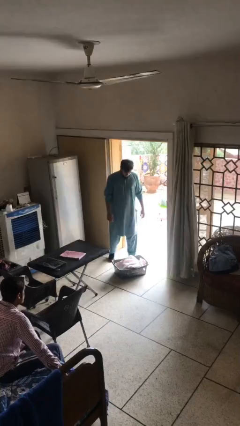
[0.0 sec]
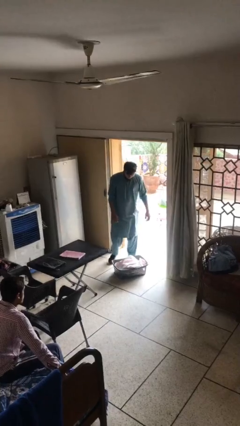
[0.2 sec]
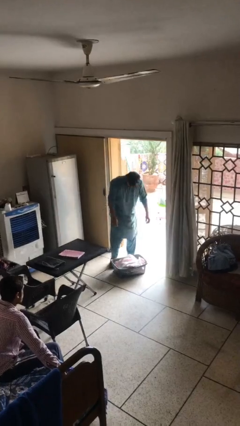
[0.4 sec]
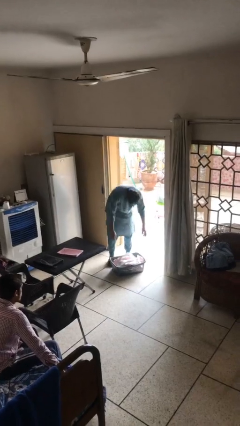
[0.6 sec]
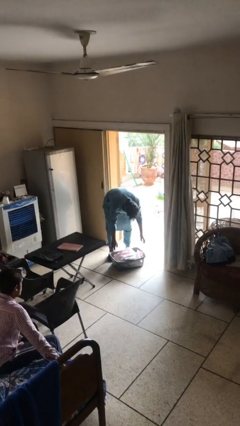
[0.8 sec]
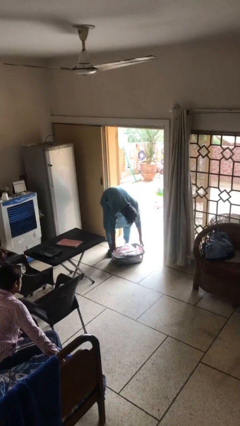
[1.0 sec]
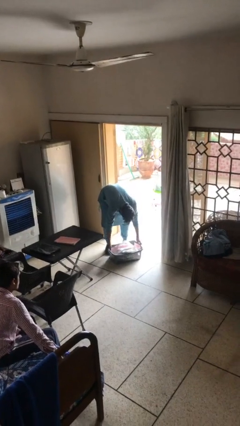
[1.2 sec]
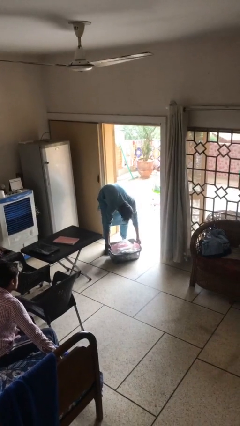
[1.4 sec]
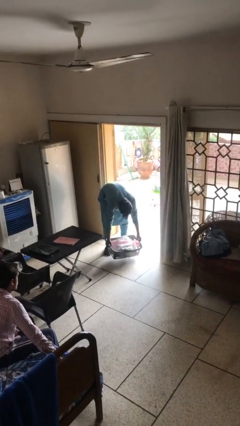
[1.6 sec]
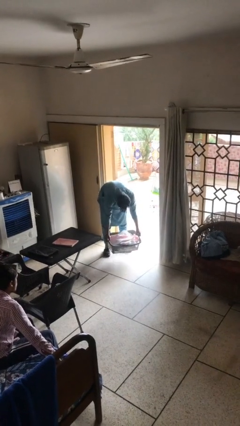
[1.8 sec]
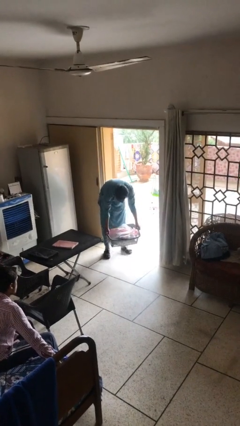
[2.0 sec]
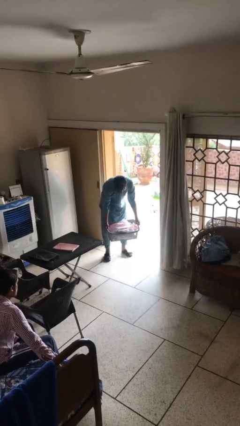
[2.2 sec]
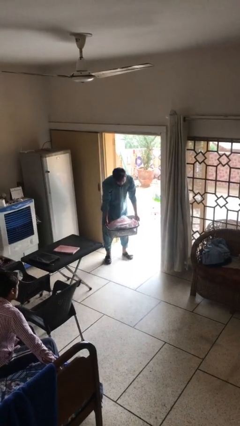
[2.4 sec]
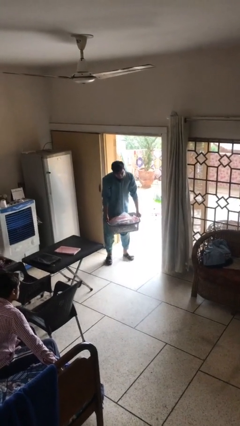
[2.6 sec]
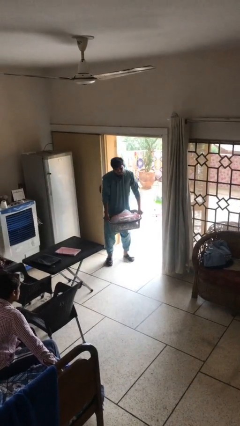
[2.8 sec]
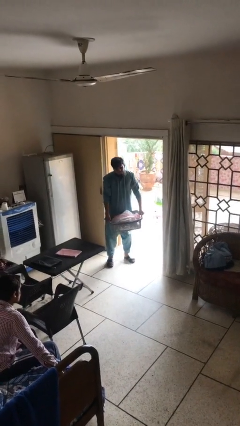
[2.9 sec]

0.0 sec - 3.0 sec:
person picks up object from floor

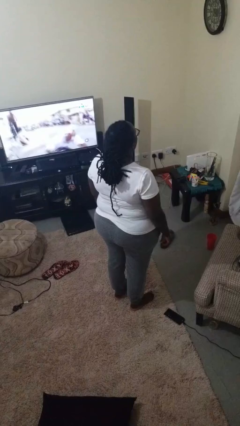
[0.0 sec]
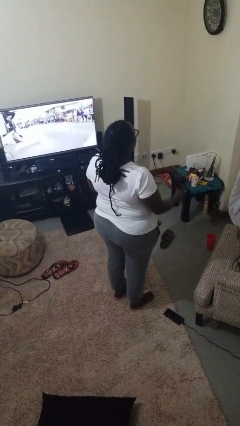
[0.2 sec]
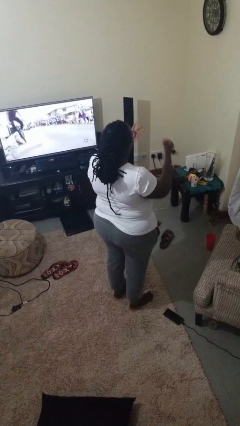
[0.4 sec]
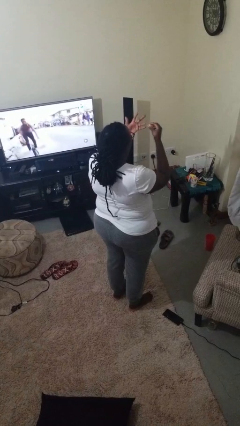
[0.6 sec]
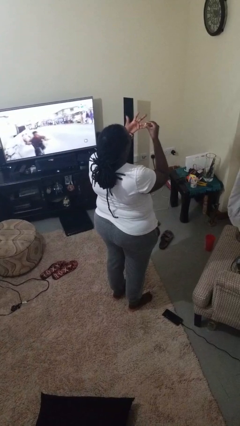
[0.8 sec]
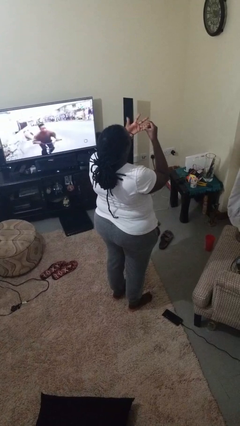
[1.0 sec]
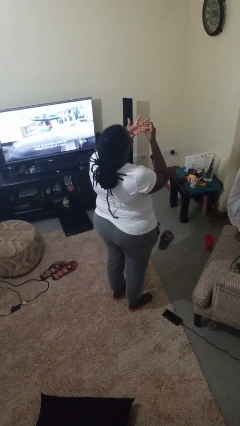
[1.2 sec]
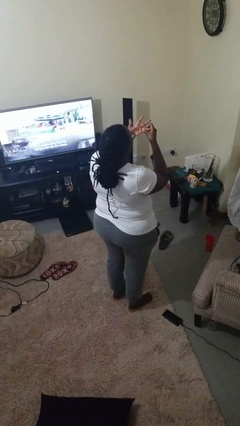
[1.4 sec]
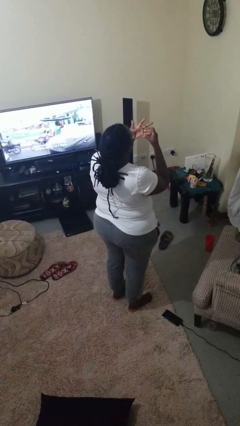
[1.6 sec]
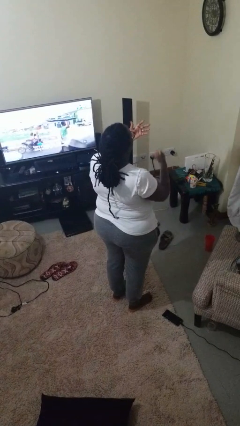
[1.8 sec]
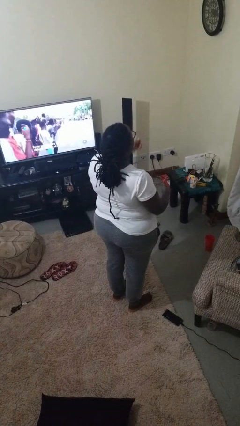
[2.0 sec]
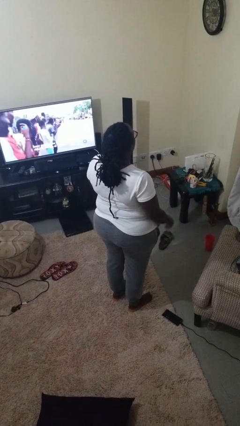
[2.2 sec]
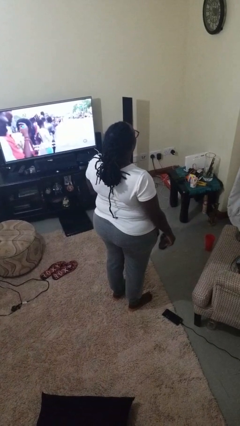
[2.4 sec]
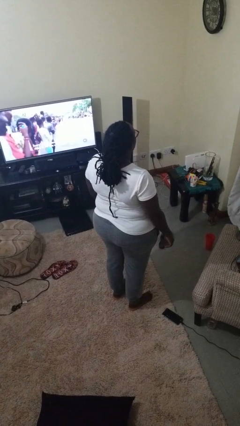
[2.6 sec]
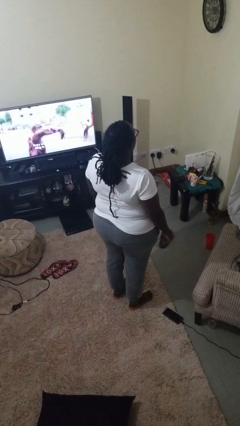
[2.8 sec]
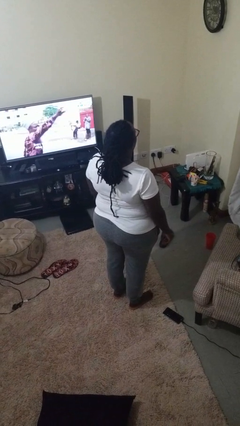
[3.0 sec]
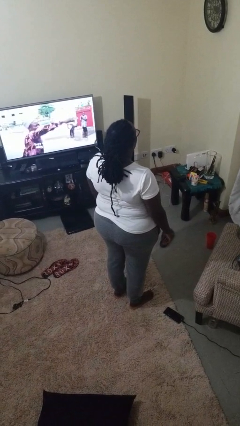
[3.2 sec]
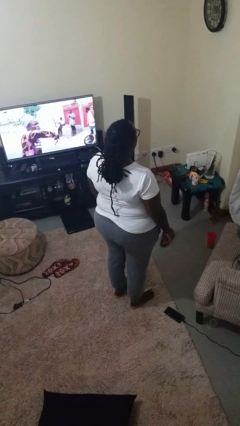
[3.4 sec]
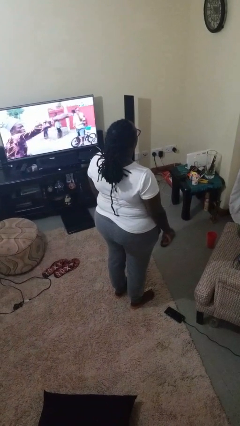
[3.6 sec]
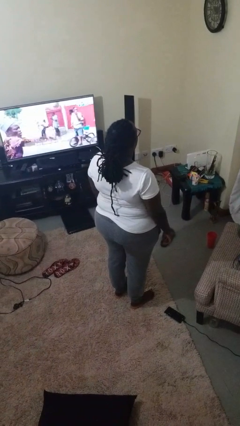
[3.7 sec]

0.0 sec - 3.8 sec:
person puts on ring

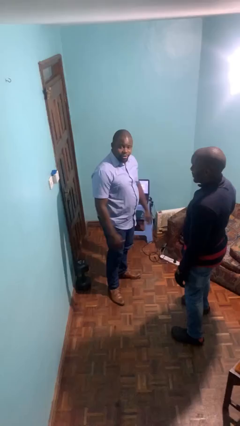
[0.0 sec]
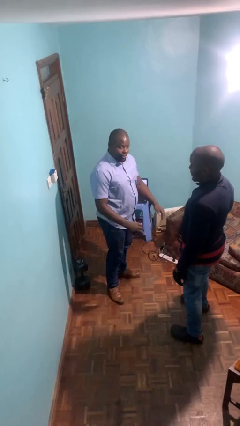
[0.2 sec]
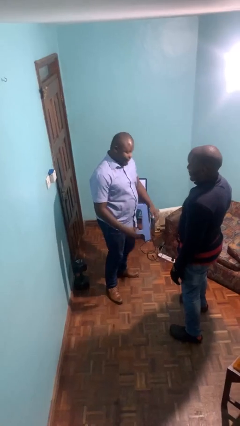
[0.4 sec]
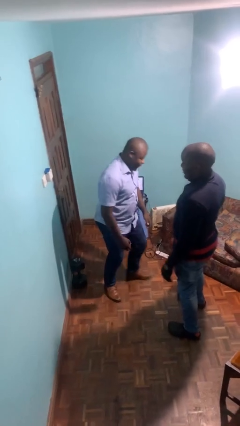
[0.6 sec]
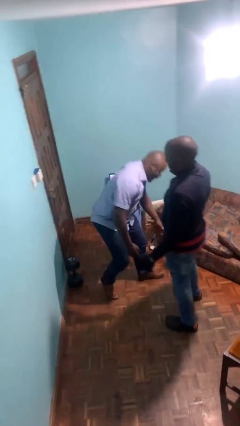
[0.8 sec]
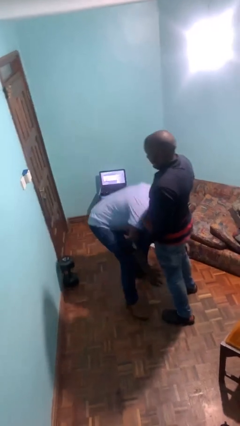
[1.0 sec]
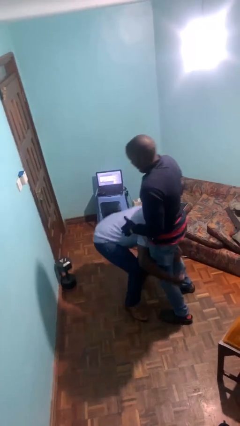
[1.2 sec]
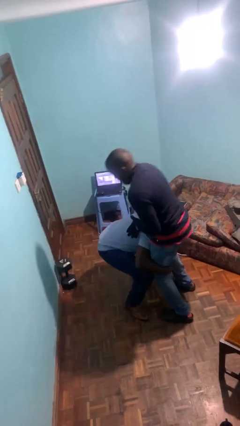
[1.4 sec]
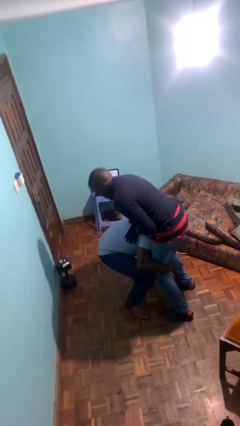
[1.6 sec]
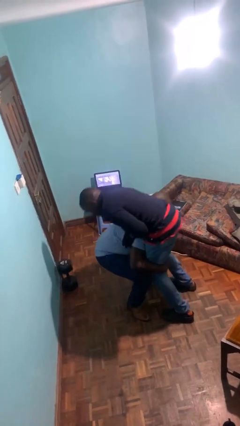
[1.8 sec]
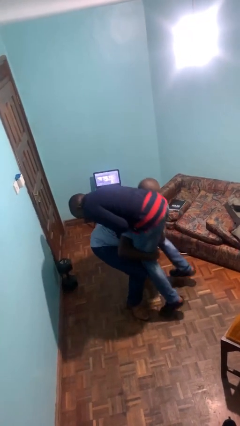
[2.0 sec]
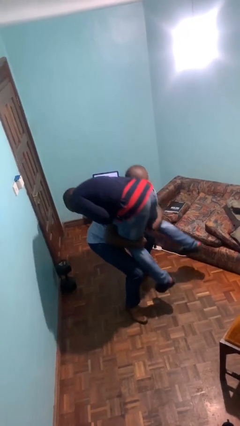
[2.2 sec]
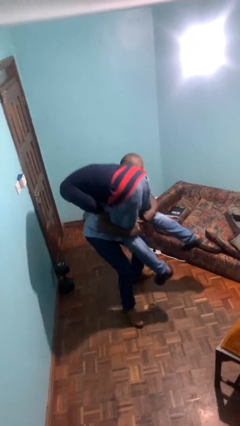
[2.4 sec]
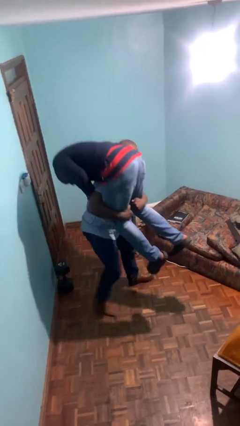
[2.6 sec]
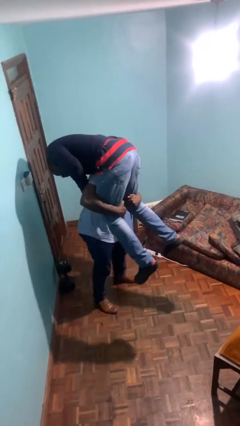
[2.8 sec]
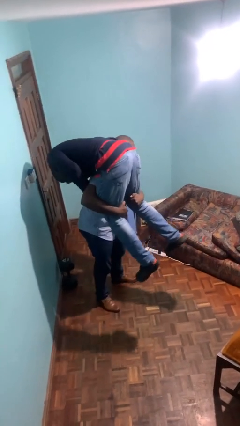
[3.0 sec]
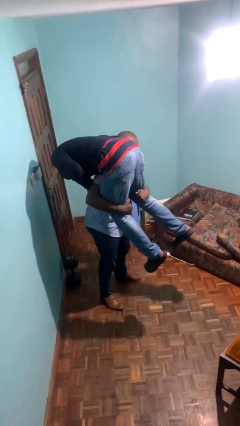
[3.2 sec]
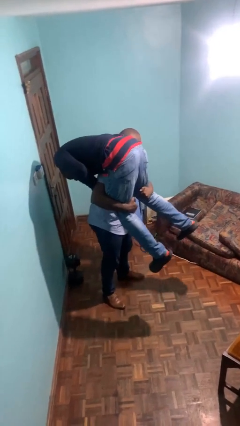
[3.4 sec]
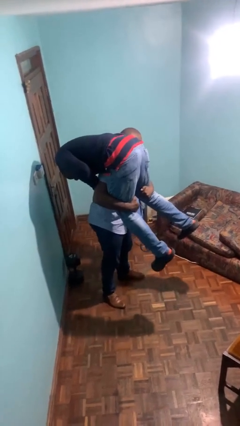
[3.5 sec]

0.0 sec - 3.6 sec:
person carries person over shoulder

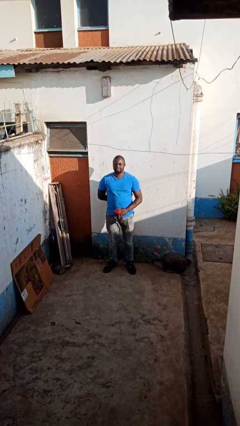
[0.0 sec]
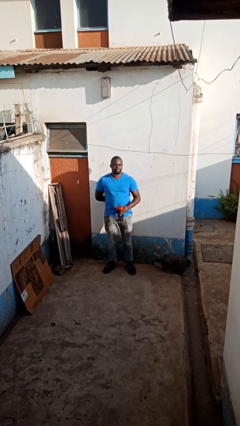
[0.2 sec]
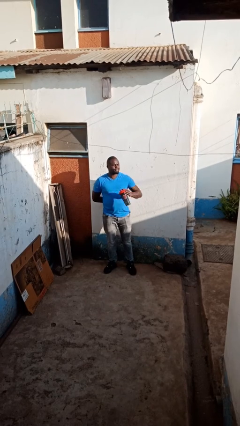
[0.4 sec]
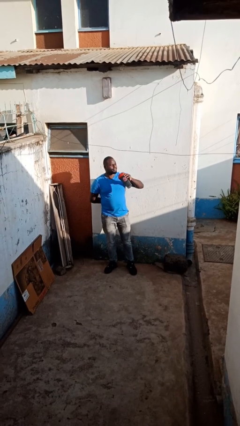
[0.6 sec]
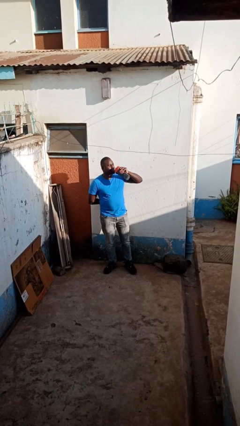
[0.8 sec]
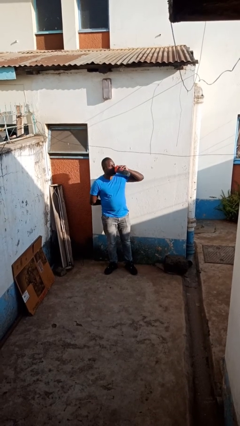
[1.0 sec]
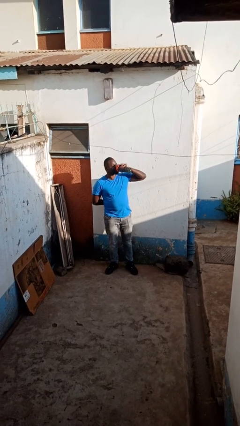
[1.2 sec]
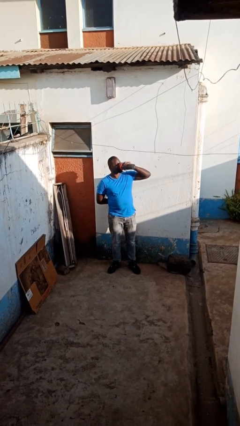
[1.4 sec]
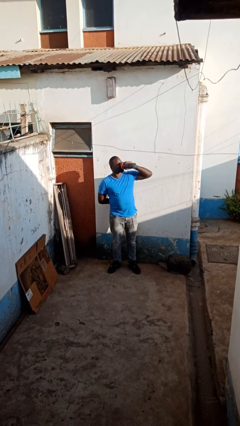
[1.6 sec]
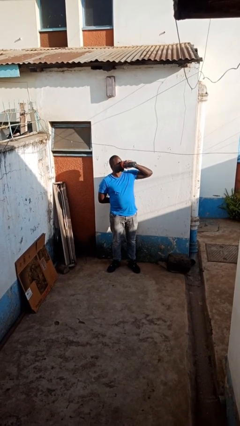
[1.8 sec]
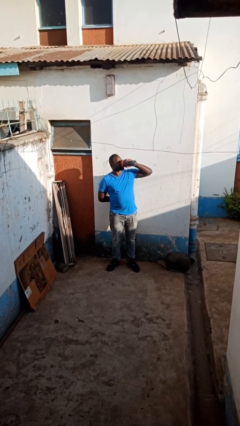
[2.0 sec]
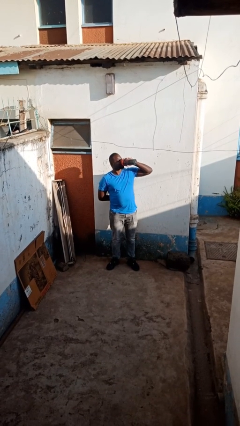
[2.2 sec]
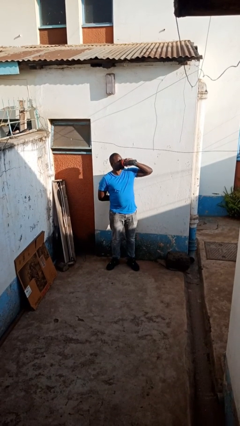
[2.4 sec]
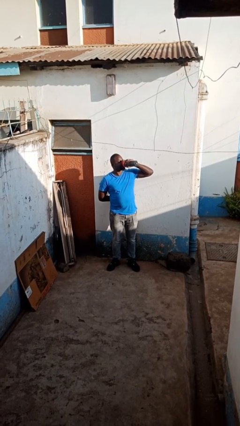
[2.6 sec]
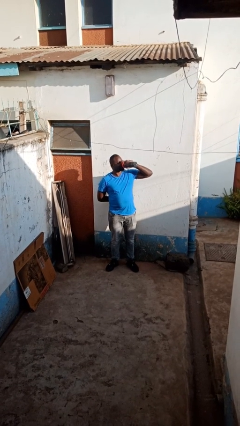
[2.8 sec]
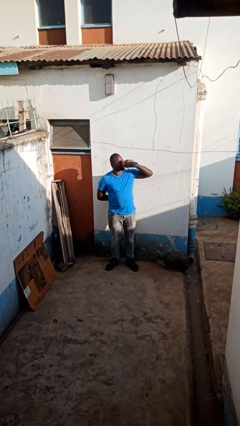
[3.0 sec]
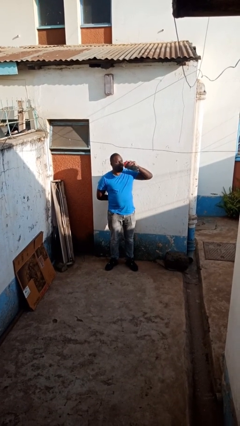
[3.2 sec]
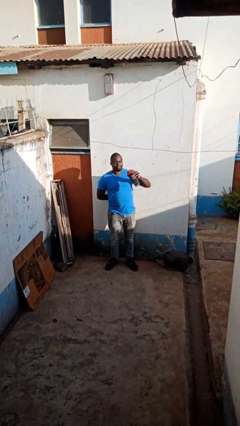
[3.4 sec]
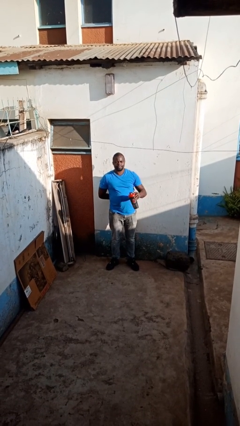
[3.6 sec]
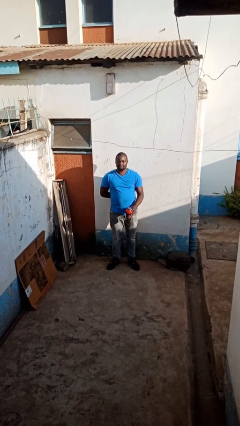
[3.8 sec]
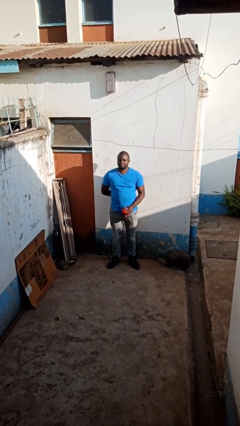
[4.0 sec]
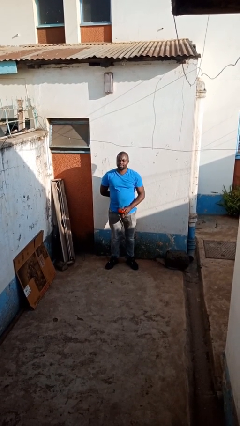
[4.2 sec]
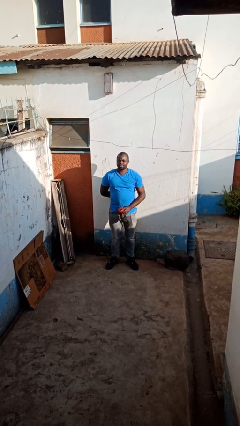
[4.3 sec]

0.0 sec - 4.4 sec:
person drinks from bottle

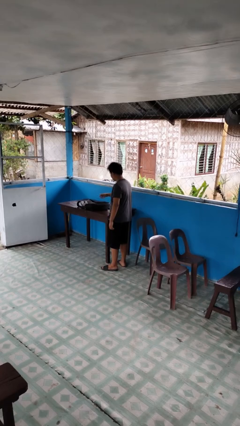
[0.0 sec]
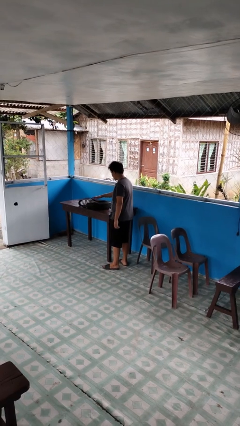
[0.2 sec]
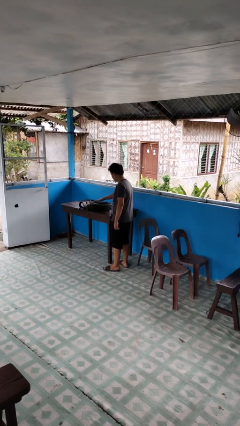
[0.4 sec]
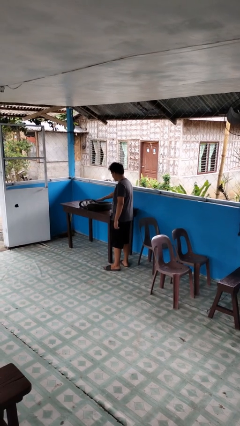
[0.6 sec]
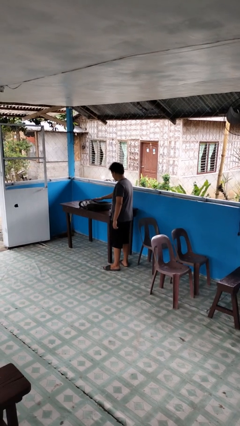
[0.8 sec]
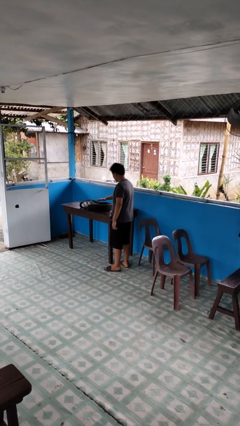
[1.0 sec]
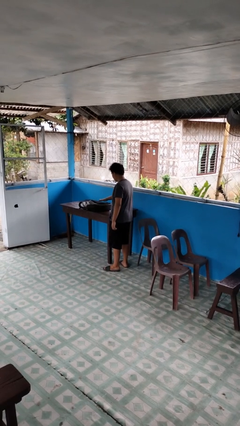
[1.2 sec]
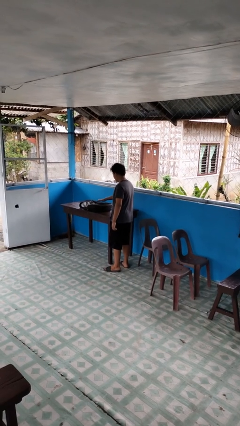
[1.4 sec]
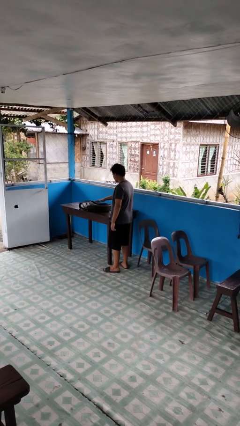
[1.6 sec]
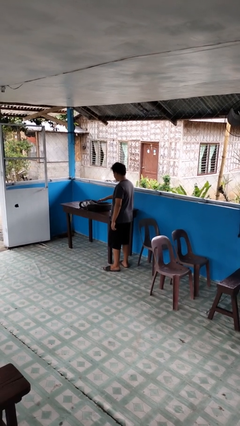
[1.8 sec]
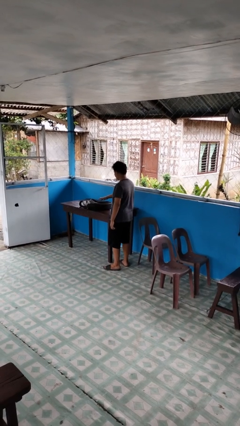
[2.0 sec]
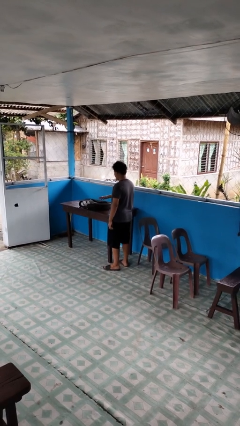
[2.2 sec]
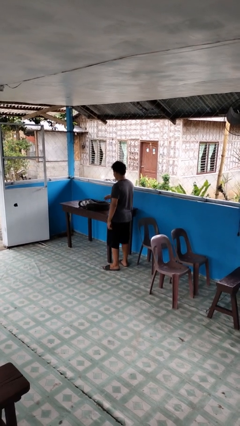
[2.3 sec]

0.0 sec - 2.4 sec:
person waves hand over object
